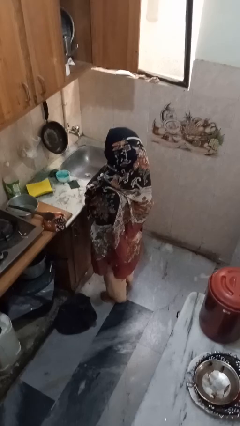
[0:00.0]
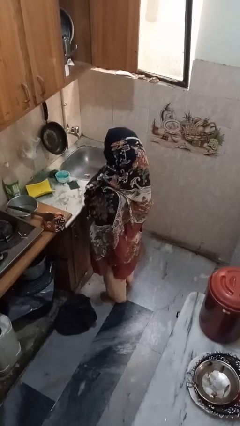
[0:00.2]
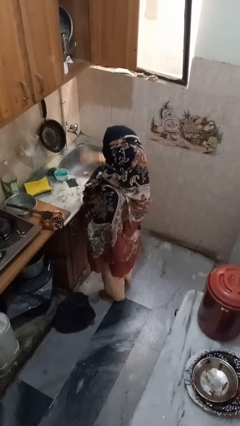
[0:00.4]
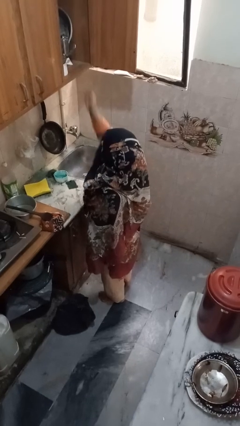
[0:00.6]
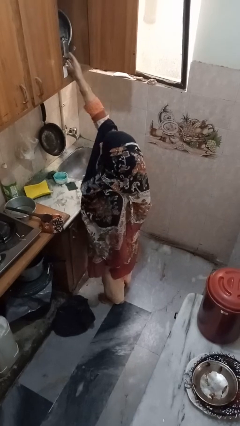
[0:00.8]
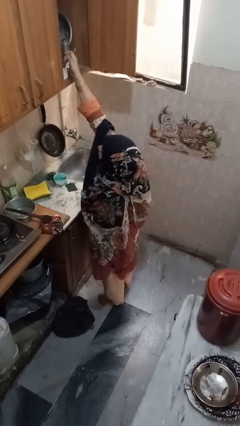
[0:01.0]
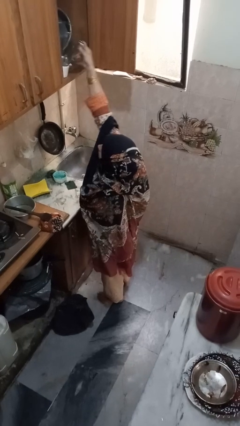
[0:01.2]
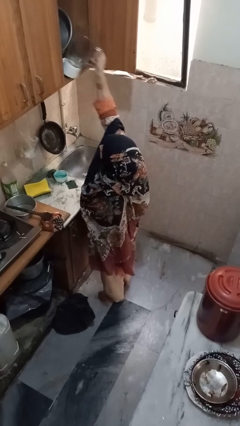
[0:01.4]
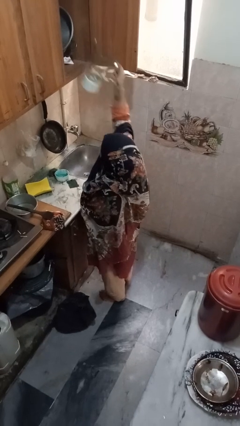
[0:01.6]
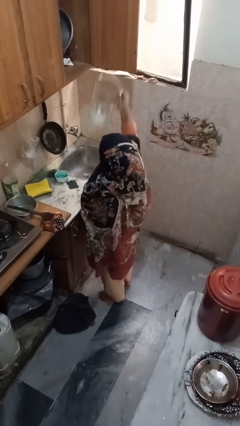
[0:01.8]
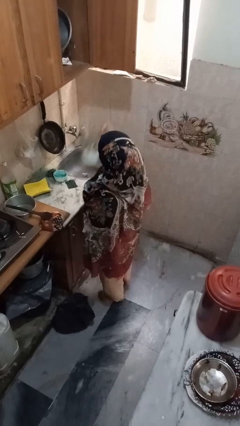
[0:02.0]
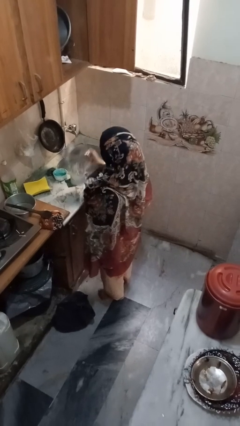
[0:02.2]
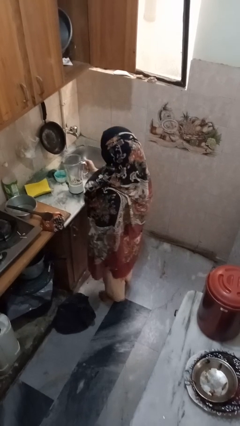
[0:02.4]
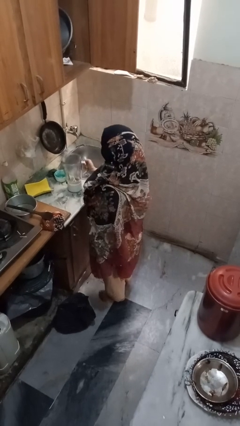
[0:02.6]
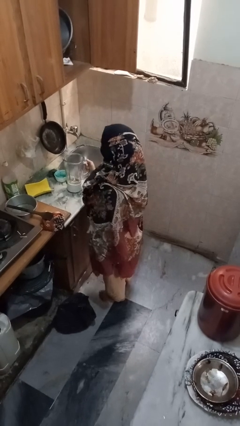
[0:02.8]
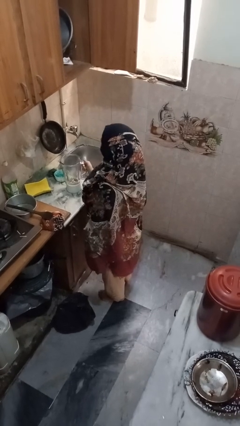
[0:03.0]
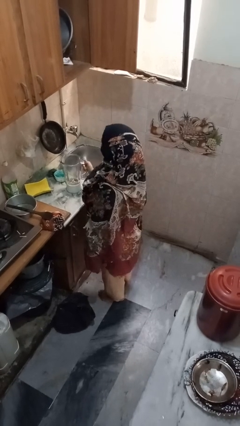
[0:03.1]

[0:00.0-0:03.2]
person puts object in cabinet

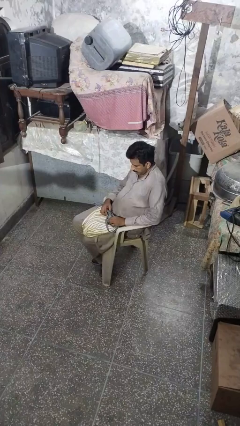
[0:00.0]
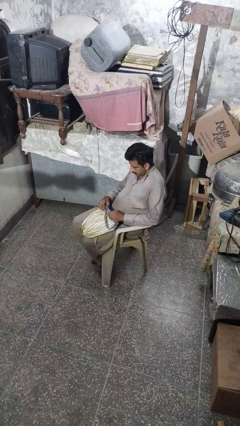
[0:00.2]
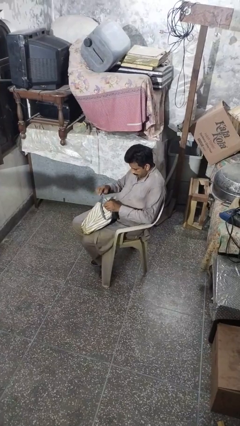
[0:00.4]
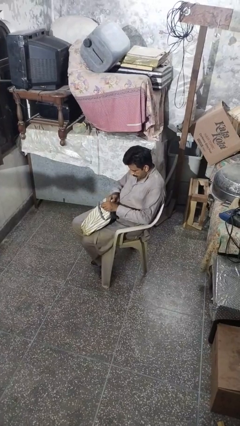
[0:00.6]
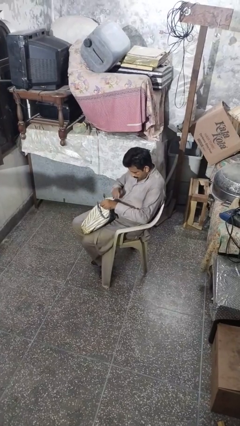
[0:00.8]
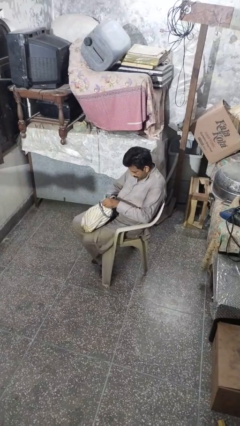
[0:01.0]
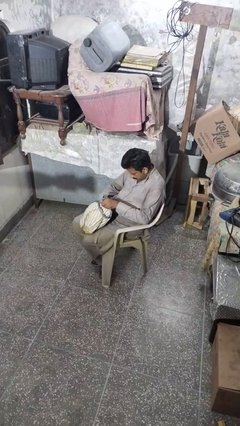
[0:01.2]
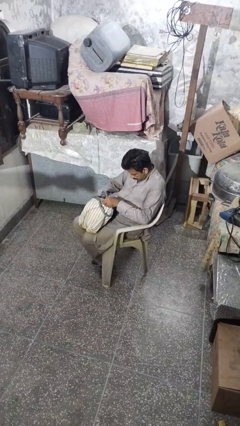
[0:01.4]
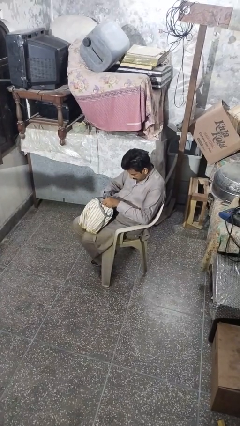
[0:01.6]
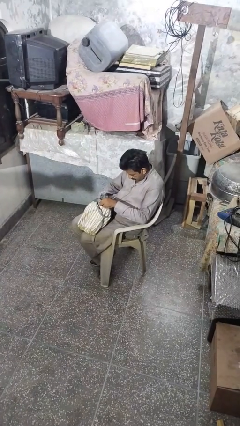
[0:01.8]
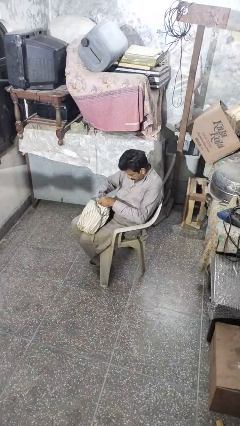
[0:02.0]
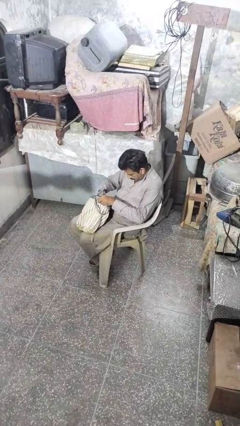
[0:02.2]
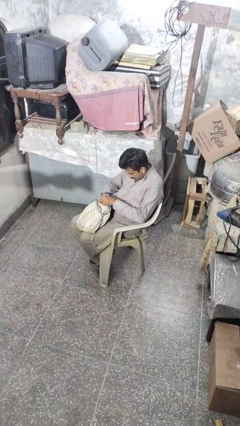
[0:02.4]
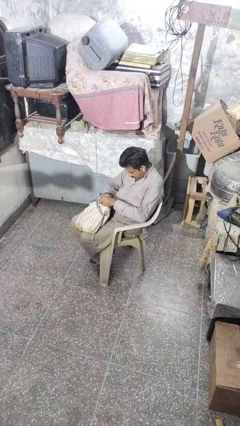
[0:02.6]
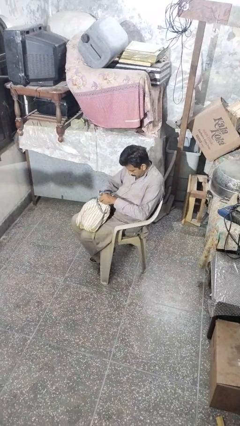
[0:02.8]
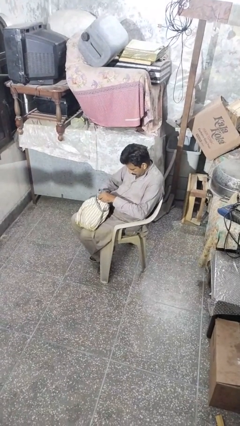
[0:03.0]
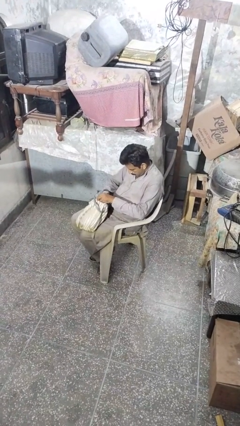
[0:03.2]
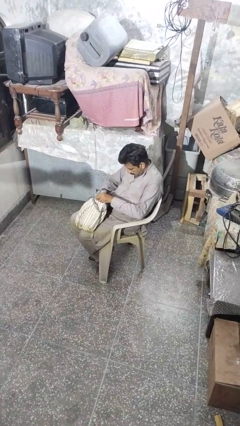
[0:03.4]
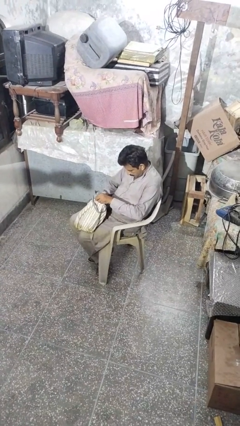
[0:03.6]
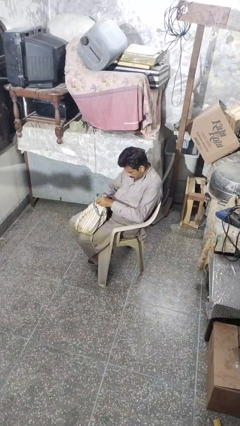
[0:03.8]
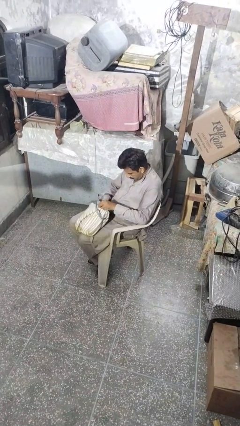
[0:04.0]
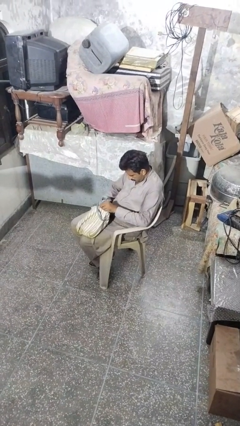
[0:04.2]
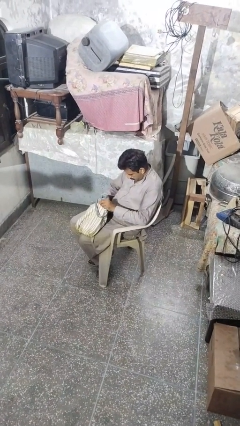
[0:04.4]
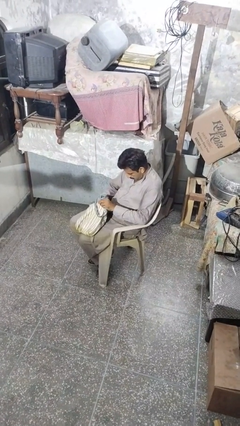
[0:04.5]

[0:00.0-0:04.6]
person searches in purse

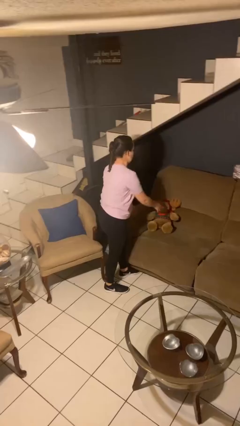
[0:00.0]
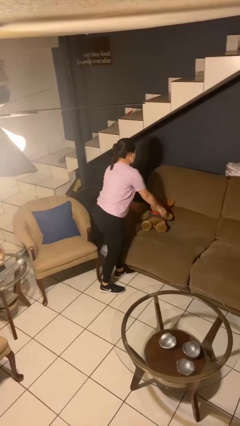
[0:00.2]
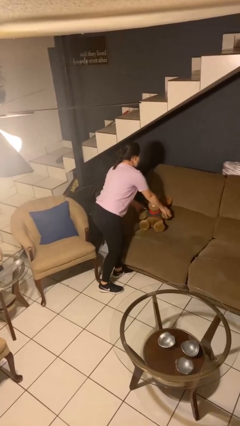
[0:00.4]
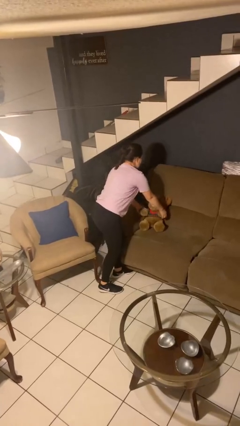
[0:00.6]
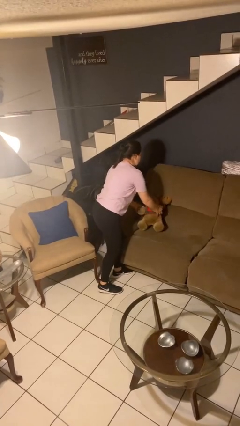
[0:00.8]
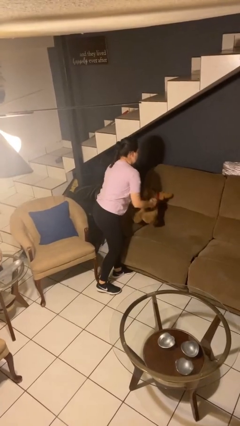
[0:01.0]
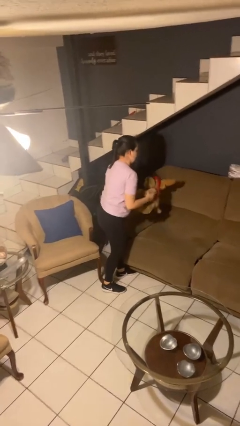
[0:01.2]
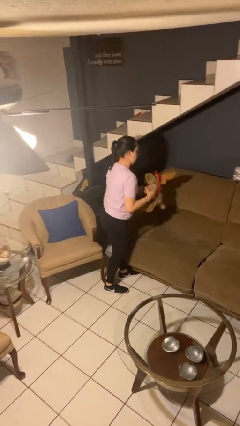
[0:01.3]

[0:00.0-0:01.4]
person picks up object from couch

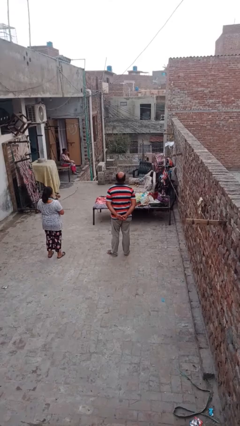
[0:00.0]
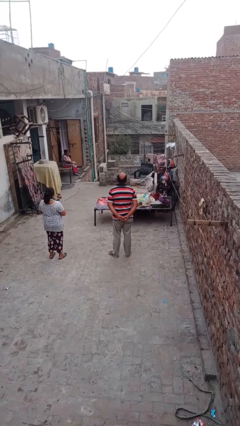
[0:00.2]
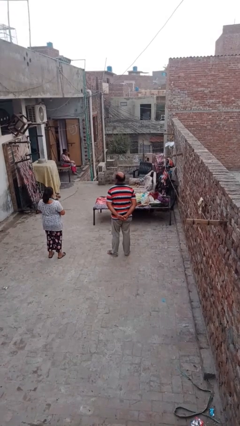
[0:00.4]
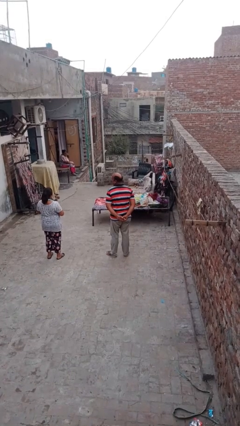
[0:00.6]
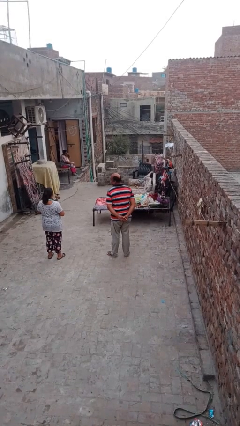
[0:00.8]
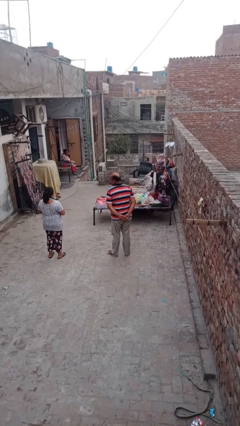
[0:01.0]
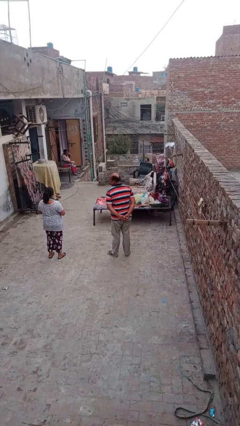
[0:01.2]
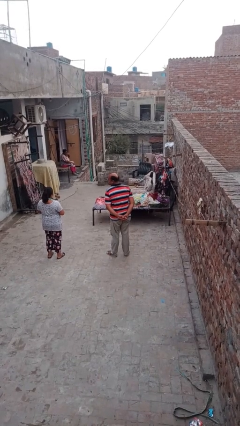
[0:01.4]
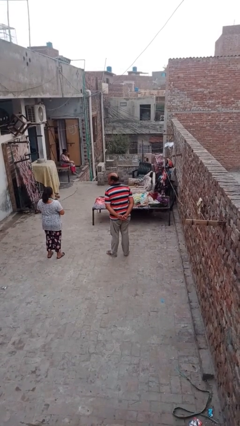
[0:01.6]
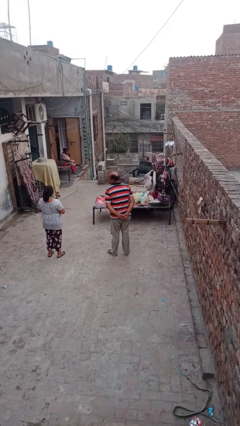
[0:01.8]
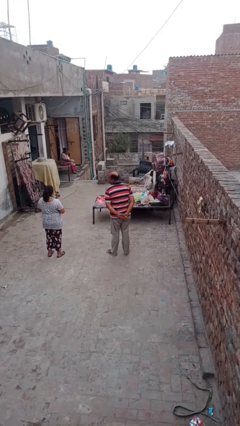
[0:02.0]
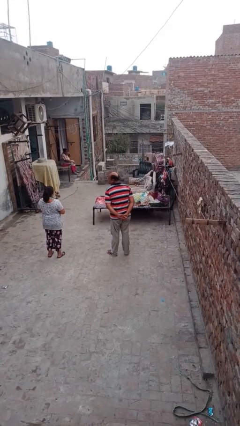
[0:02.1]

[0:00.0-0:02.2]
person looks over shoulder

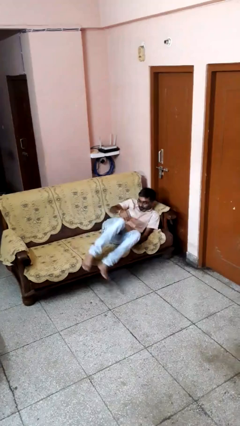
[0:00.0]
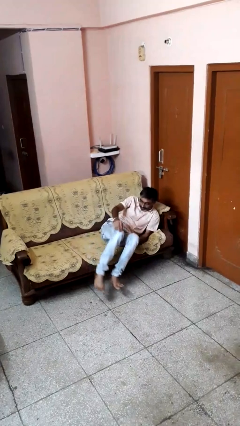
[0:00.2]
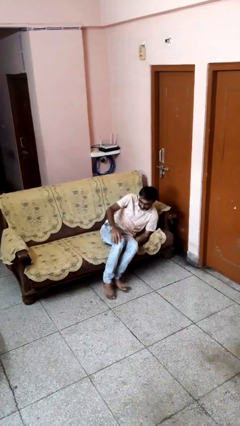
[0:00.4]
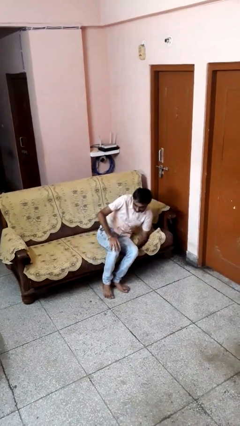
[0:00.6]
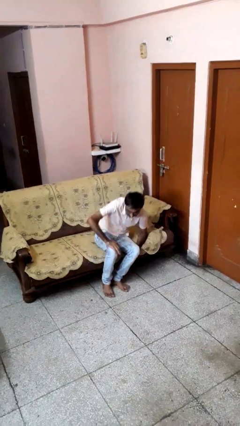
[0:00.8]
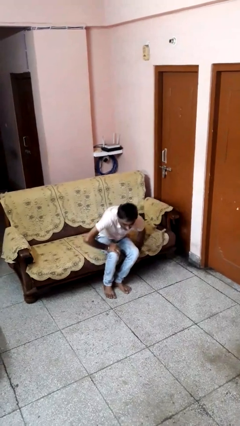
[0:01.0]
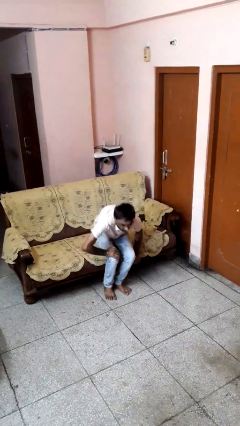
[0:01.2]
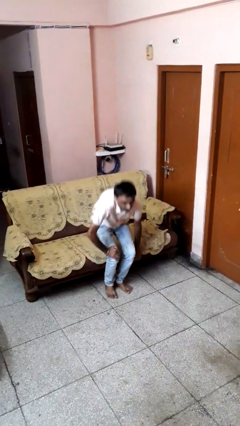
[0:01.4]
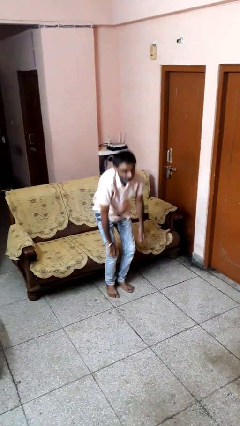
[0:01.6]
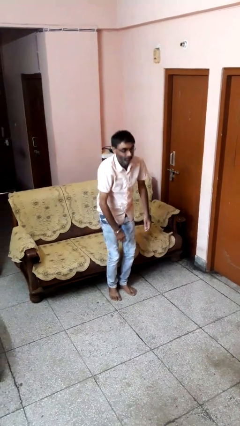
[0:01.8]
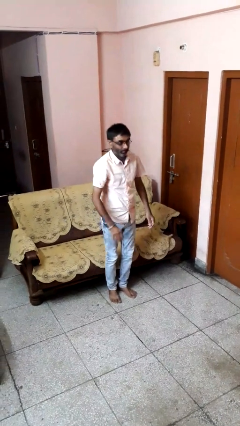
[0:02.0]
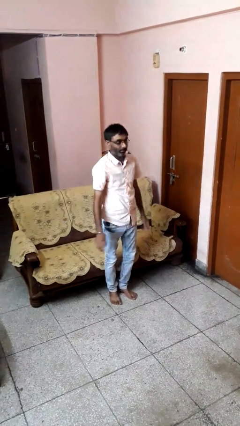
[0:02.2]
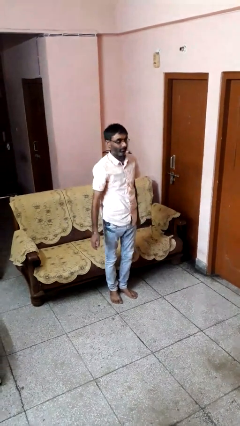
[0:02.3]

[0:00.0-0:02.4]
person stands up

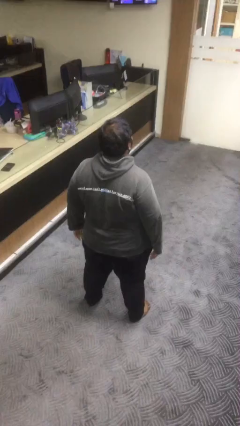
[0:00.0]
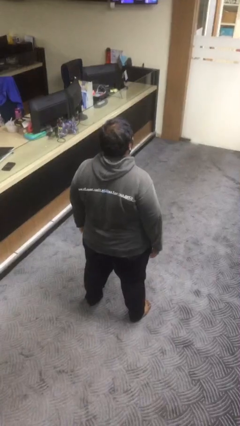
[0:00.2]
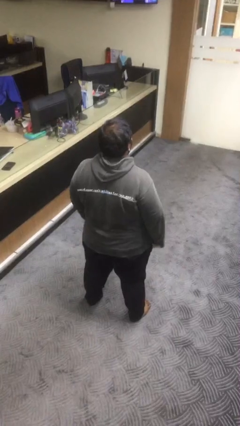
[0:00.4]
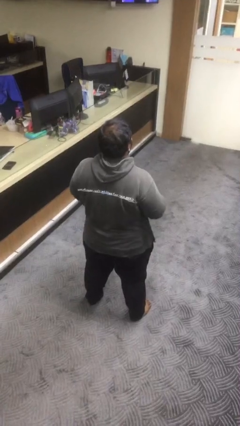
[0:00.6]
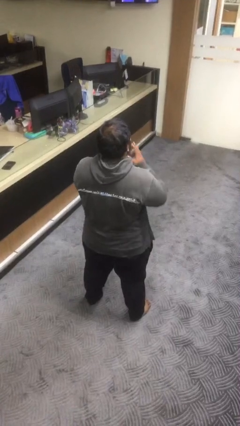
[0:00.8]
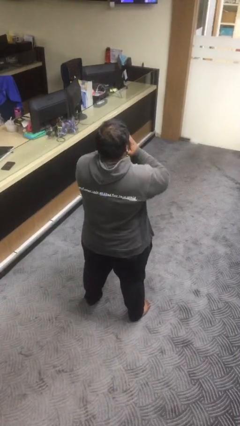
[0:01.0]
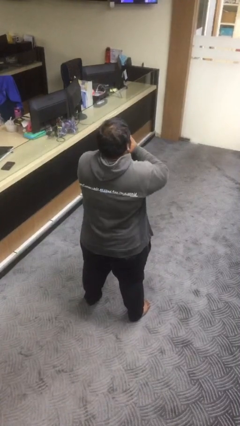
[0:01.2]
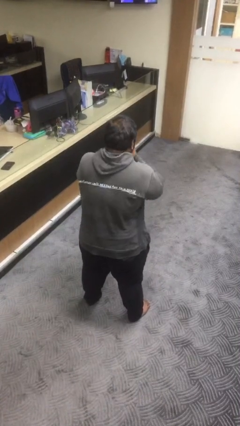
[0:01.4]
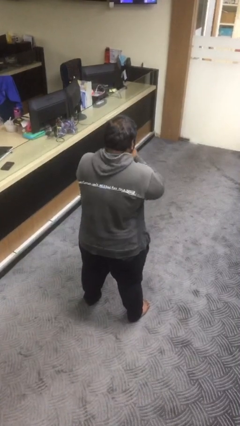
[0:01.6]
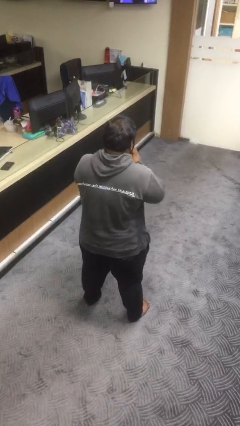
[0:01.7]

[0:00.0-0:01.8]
person sneezes into hand

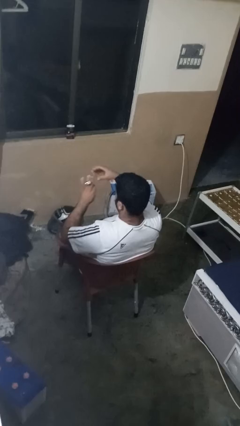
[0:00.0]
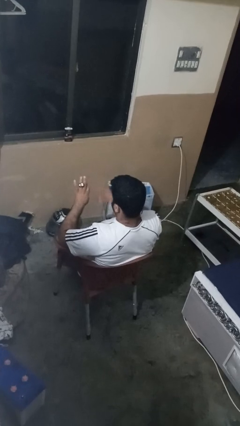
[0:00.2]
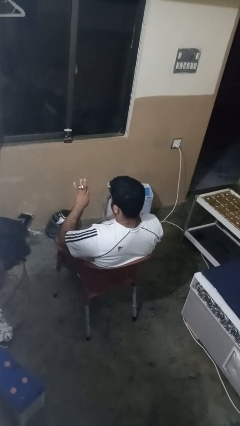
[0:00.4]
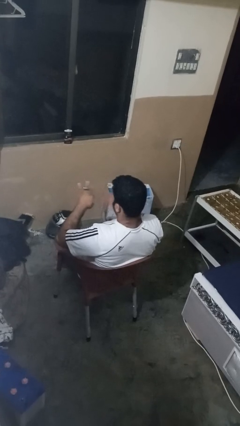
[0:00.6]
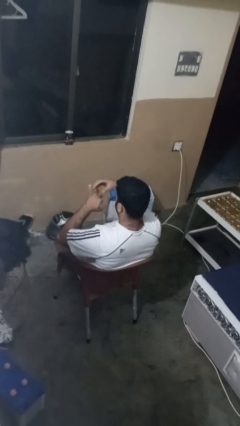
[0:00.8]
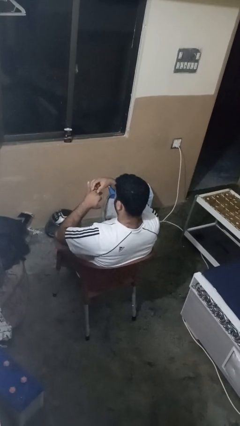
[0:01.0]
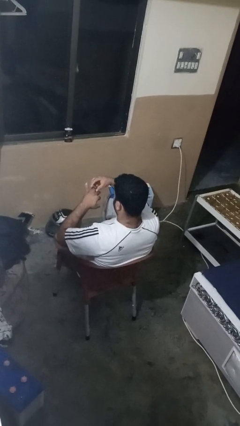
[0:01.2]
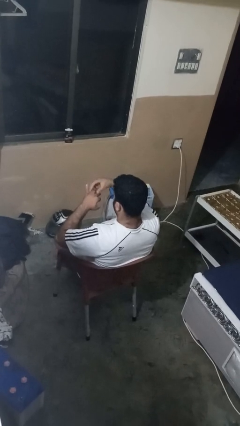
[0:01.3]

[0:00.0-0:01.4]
person takes off ring
